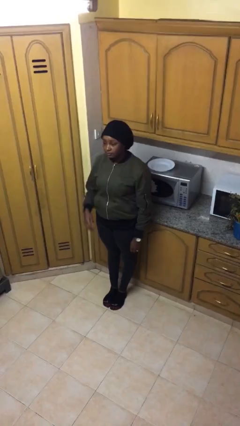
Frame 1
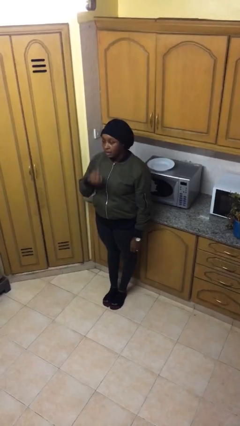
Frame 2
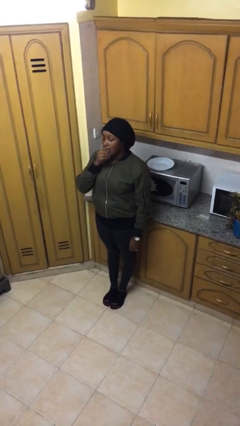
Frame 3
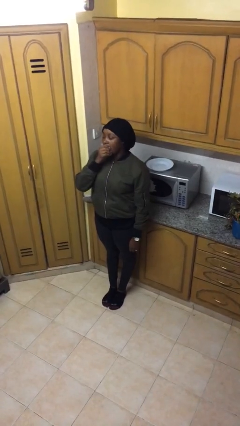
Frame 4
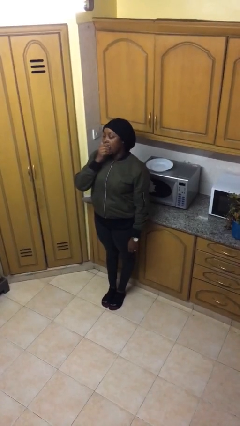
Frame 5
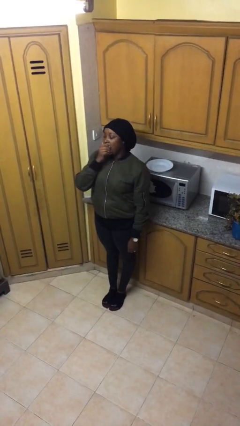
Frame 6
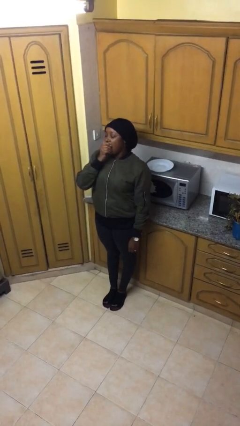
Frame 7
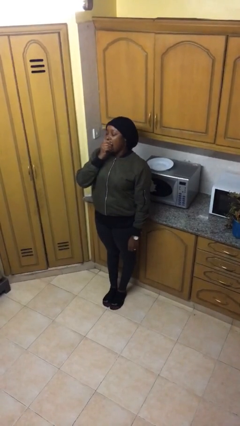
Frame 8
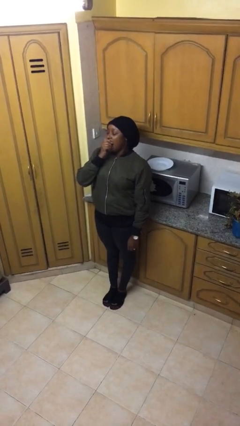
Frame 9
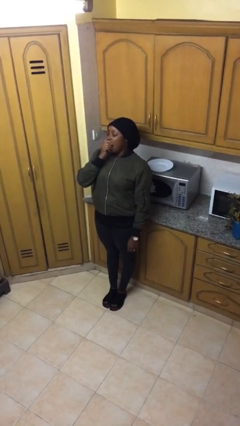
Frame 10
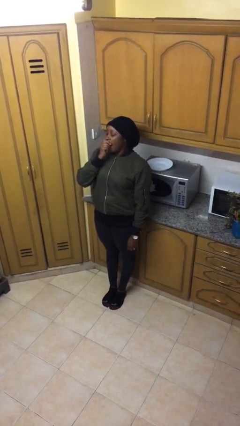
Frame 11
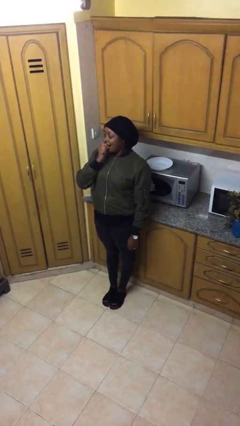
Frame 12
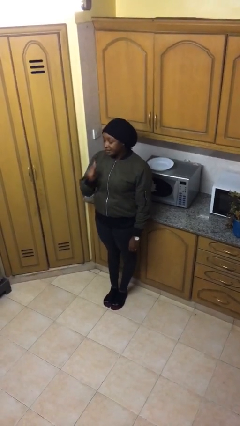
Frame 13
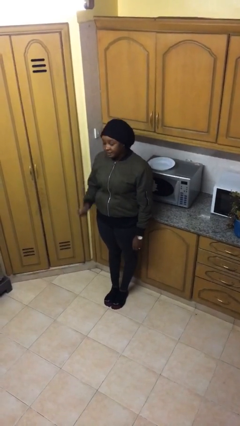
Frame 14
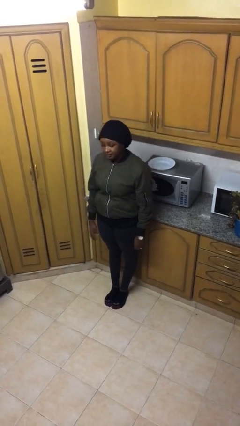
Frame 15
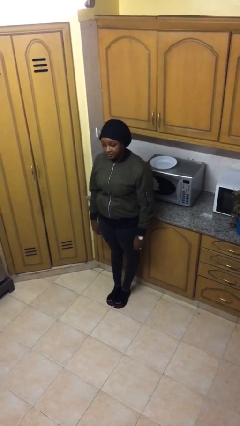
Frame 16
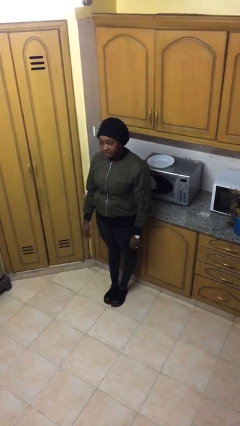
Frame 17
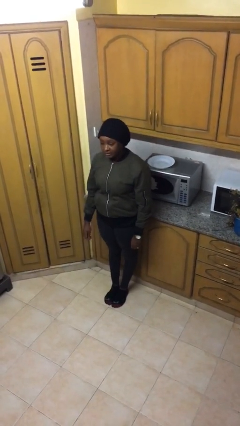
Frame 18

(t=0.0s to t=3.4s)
person yawns

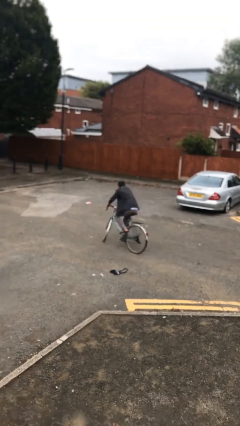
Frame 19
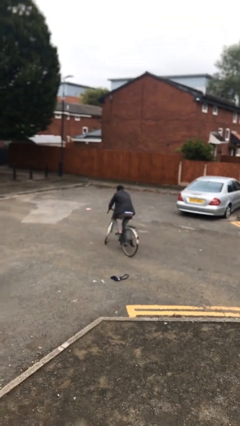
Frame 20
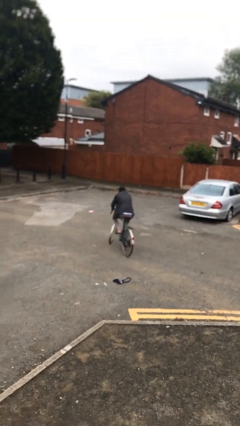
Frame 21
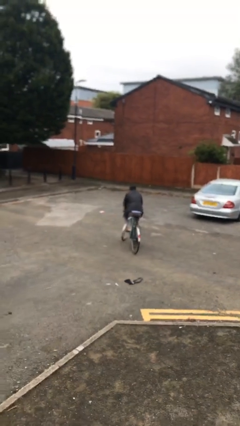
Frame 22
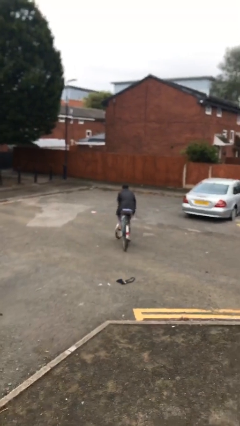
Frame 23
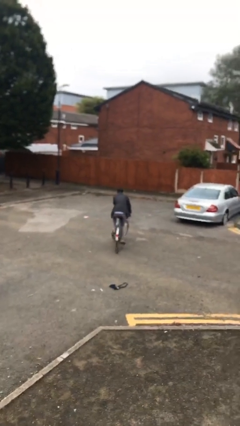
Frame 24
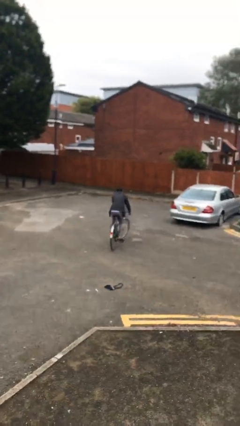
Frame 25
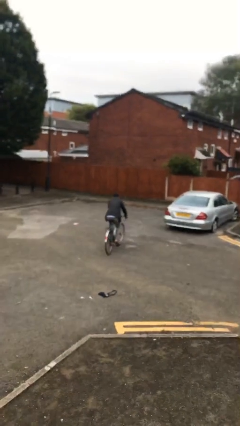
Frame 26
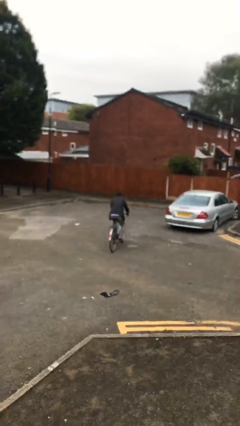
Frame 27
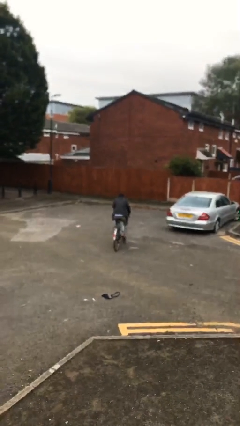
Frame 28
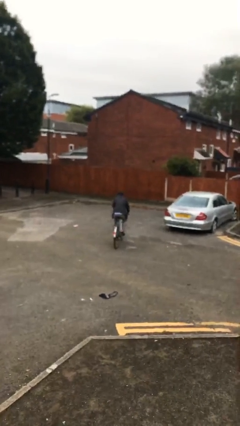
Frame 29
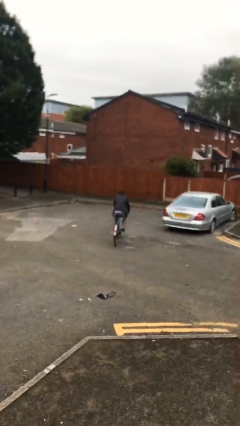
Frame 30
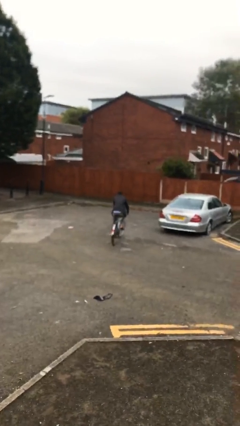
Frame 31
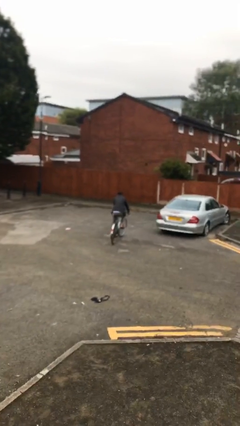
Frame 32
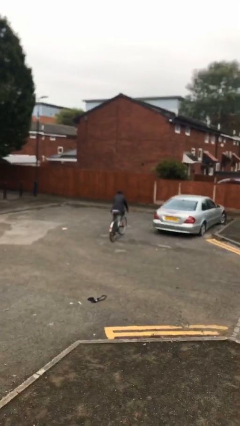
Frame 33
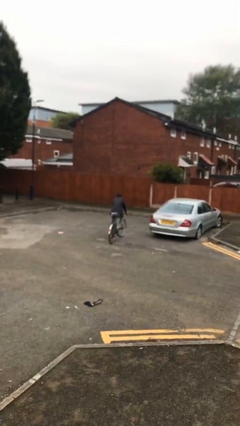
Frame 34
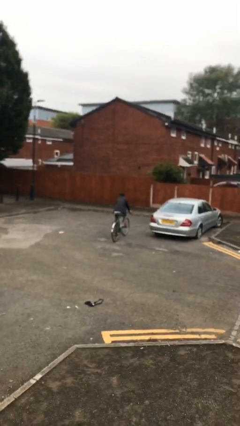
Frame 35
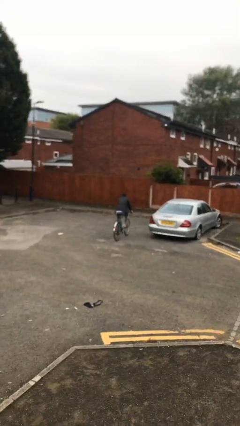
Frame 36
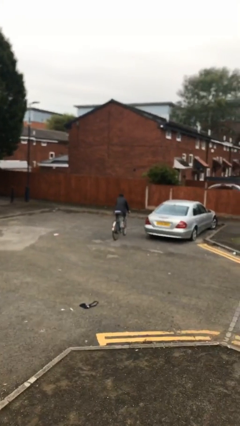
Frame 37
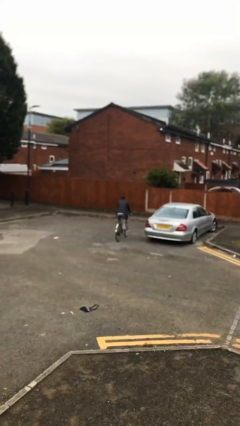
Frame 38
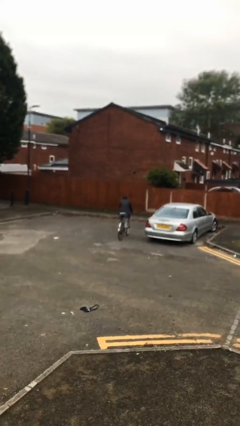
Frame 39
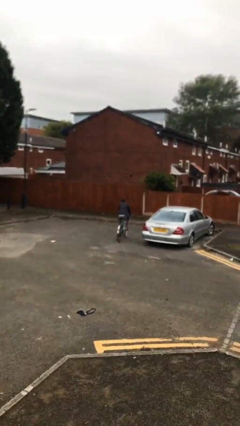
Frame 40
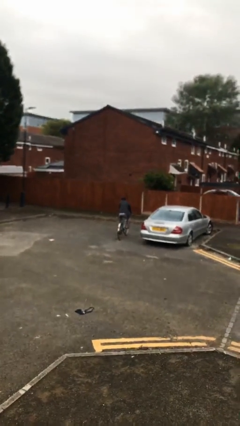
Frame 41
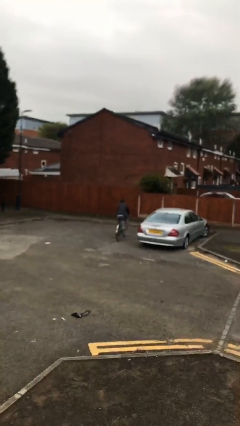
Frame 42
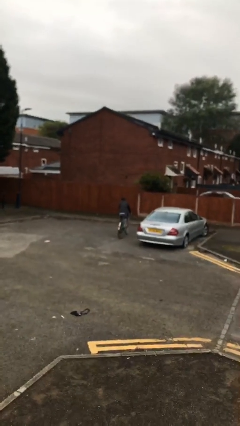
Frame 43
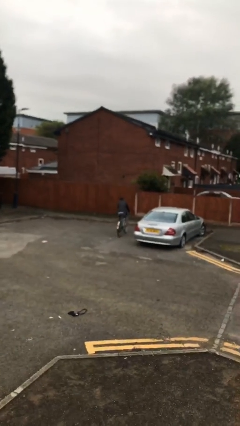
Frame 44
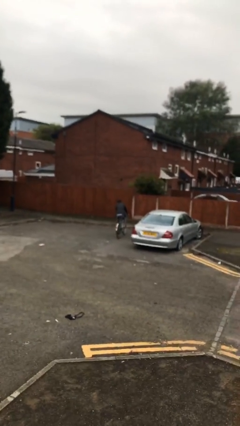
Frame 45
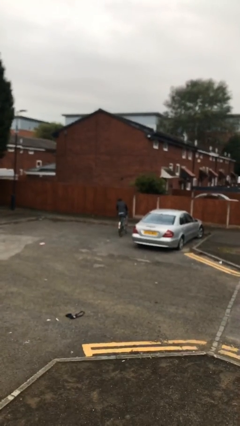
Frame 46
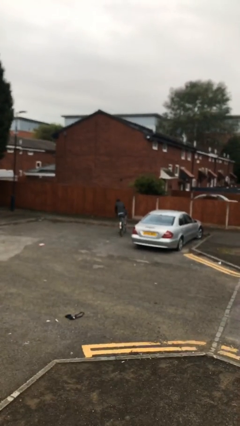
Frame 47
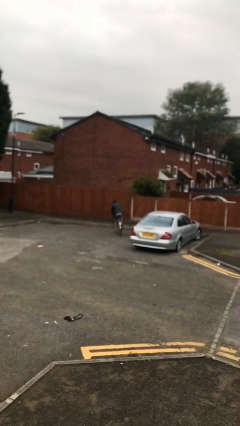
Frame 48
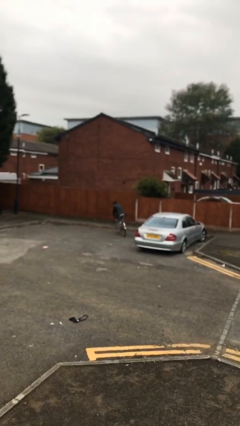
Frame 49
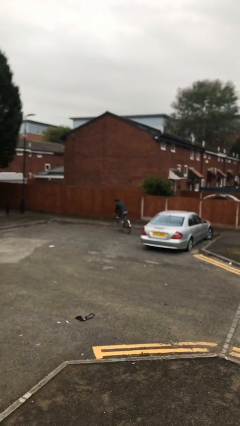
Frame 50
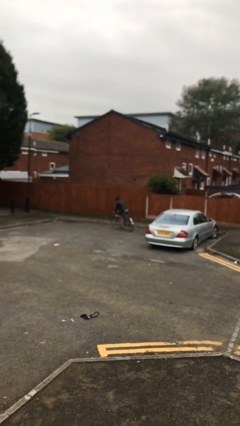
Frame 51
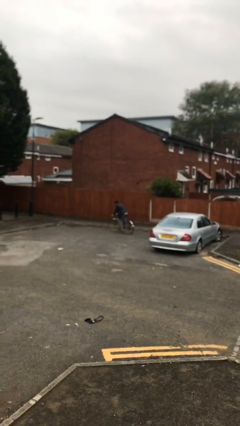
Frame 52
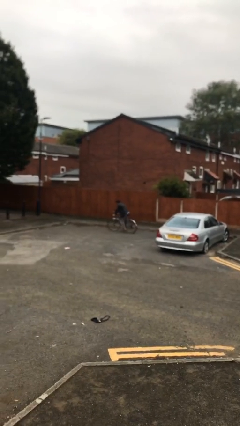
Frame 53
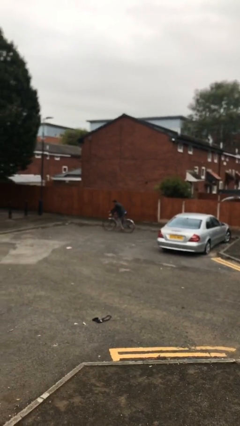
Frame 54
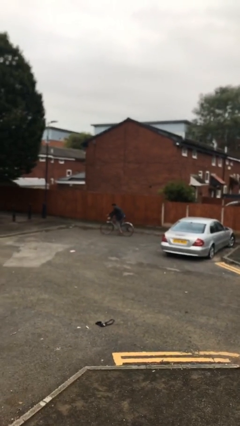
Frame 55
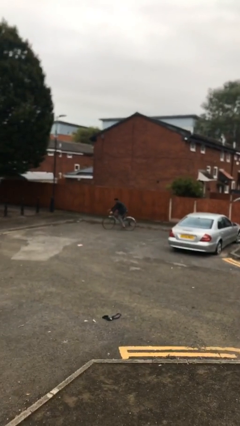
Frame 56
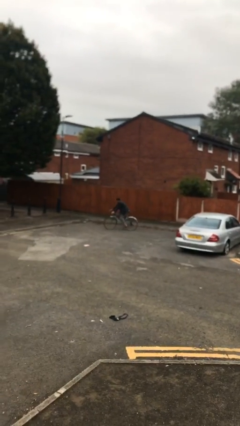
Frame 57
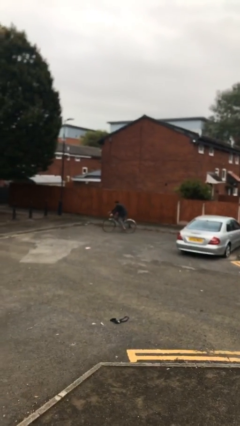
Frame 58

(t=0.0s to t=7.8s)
person rides bicycle

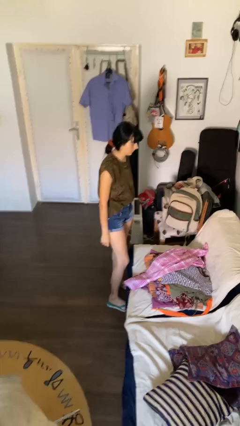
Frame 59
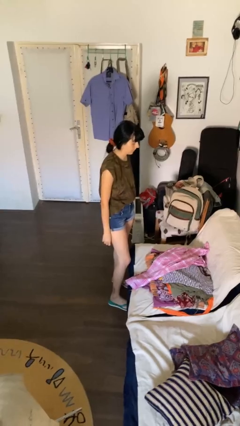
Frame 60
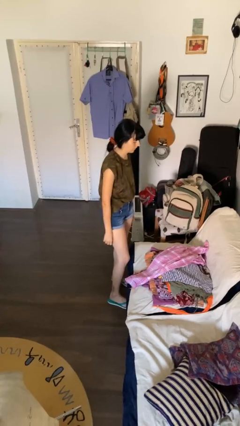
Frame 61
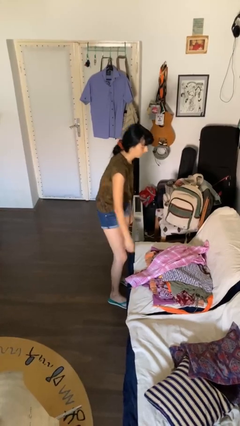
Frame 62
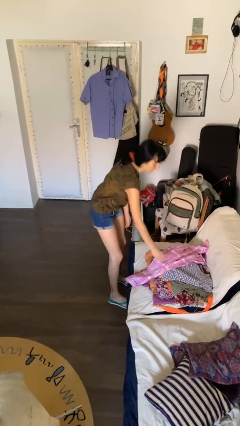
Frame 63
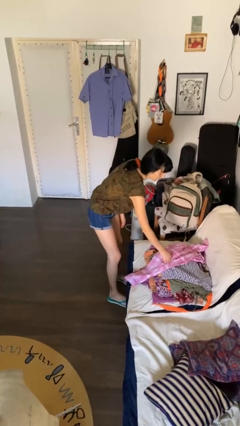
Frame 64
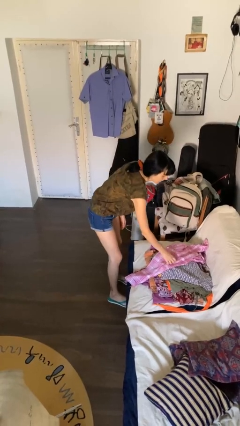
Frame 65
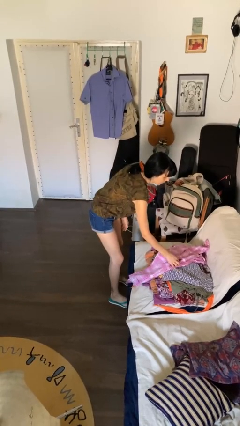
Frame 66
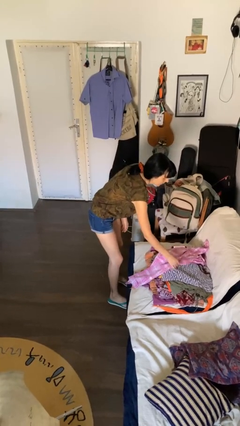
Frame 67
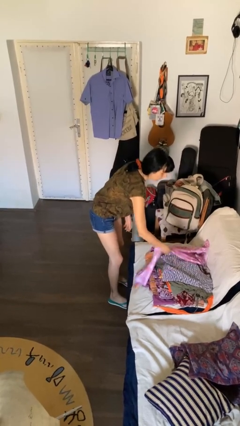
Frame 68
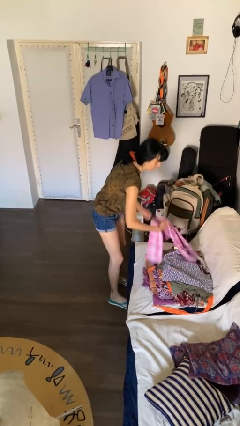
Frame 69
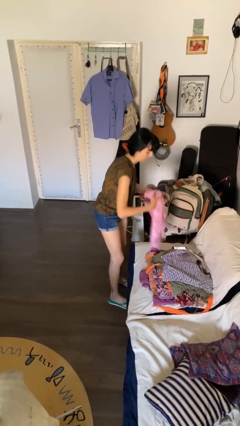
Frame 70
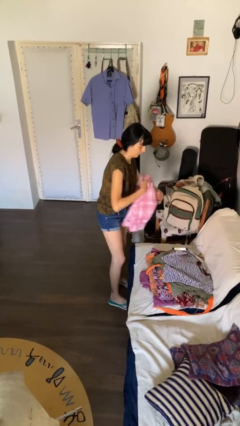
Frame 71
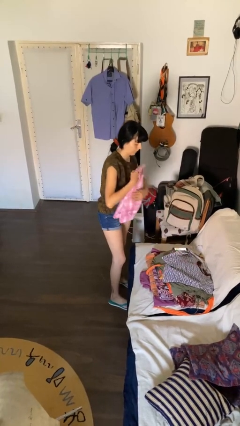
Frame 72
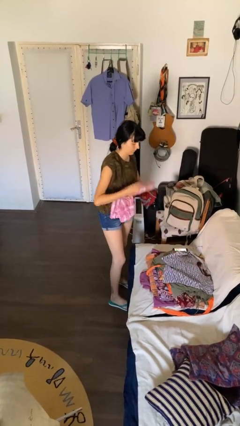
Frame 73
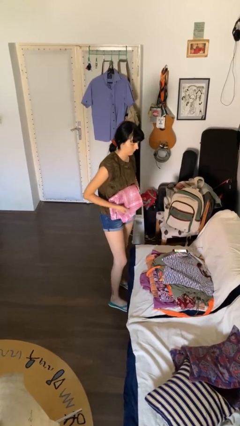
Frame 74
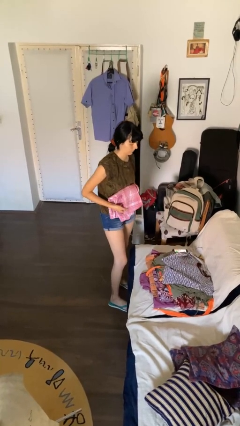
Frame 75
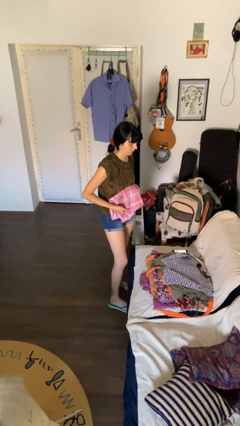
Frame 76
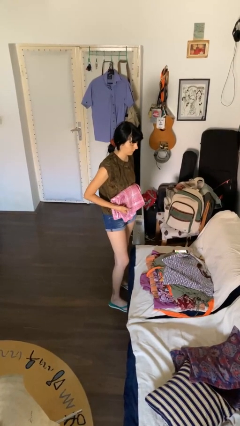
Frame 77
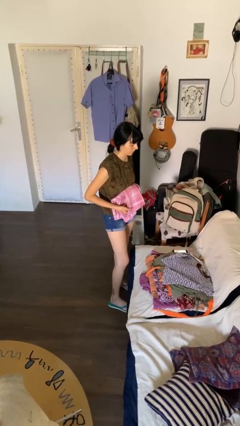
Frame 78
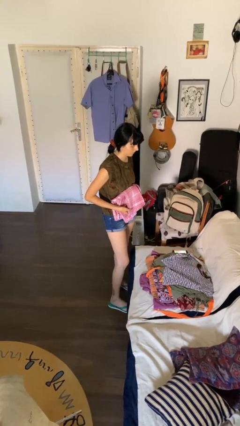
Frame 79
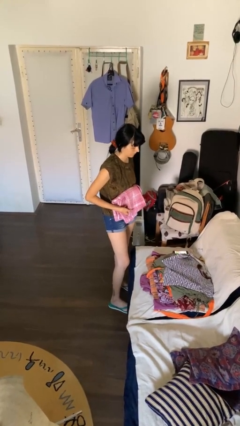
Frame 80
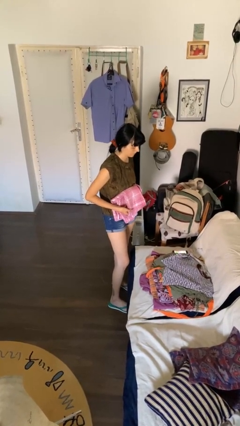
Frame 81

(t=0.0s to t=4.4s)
person folds pants

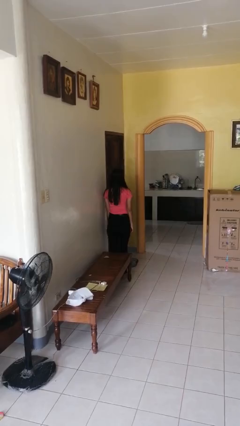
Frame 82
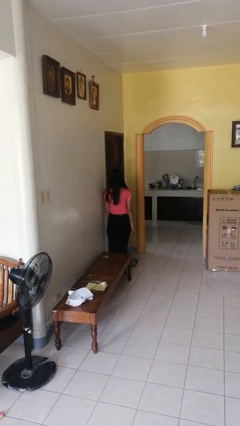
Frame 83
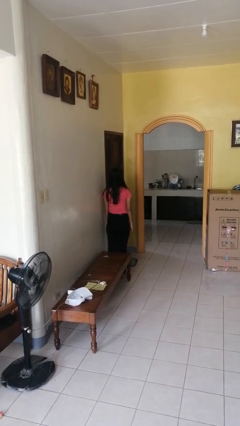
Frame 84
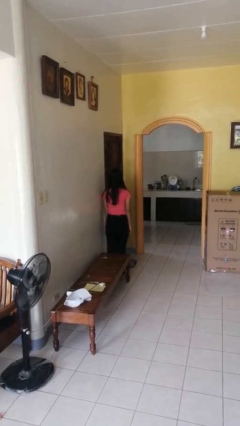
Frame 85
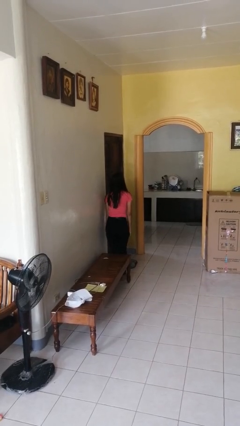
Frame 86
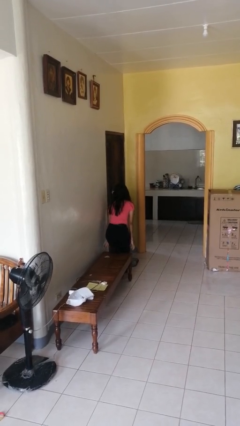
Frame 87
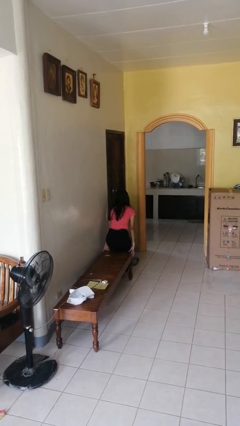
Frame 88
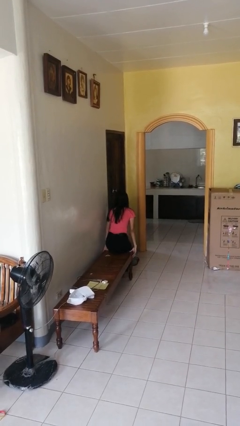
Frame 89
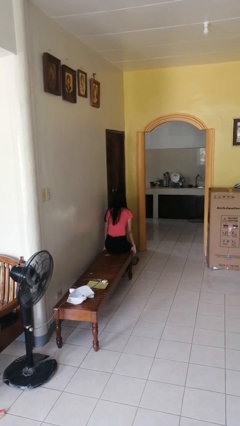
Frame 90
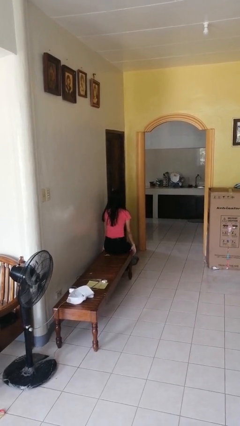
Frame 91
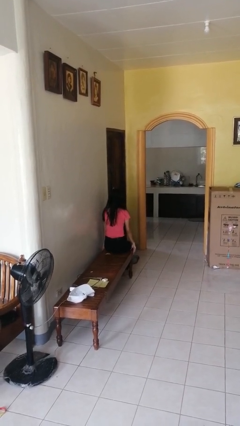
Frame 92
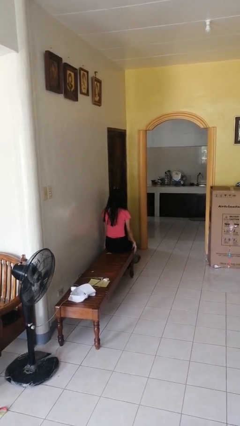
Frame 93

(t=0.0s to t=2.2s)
person sits down

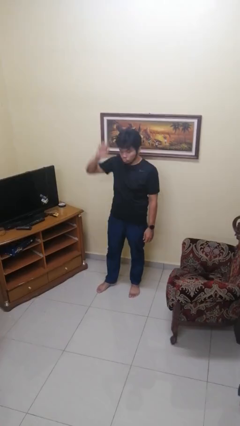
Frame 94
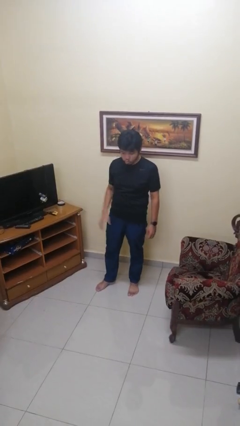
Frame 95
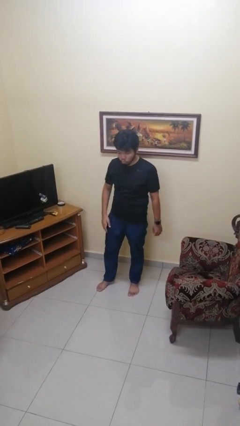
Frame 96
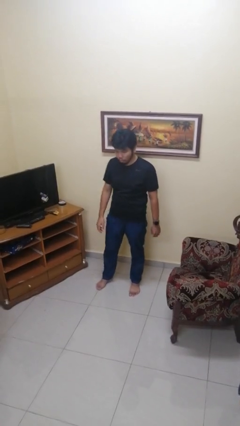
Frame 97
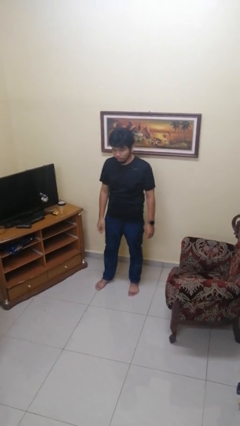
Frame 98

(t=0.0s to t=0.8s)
person gestures lower hand
